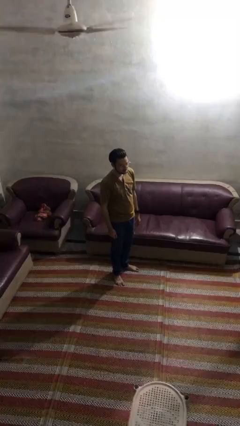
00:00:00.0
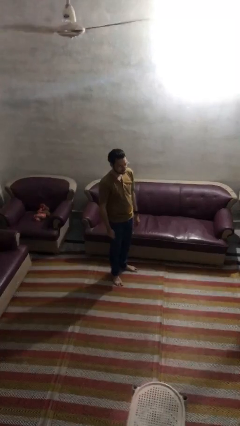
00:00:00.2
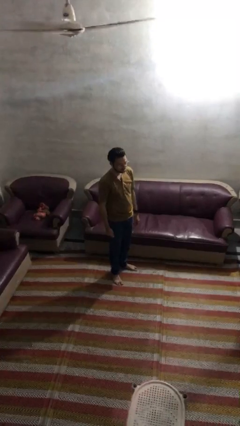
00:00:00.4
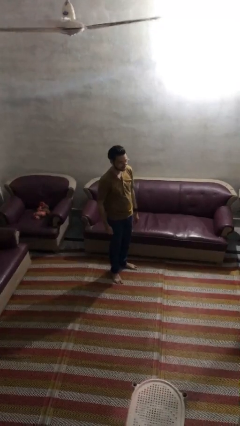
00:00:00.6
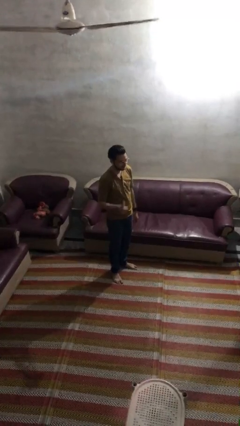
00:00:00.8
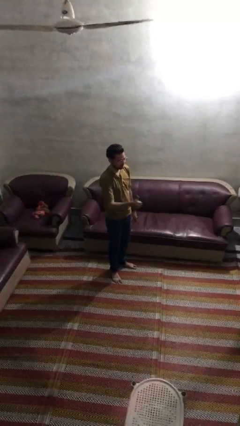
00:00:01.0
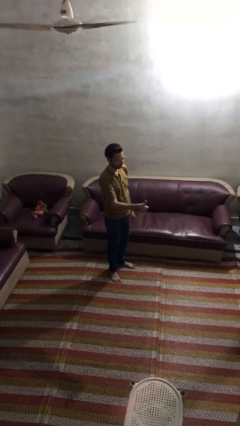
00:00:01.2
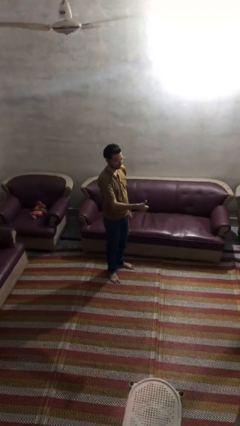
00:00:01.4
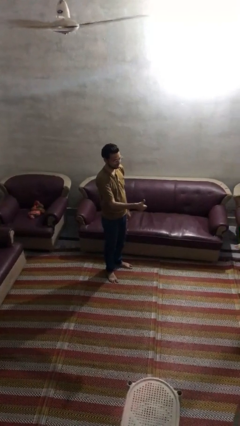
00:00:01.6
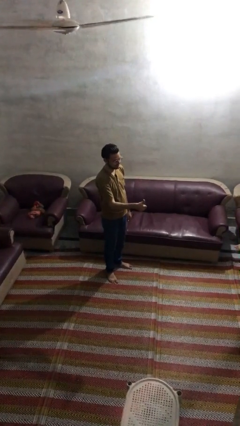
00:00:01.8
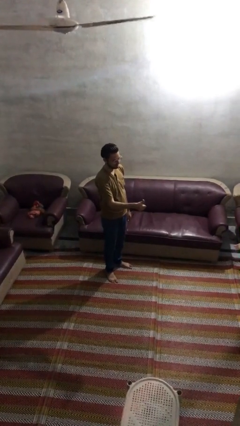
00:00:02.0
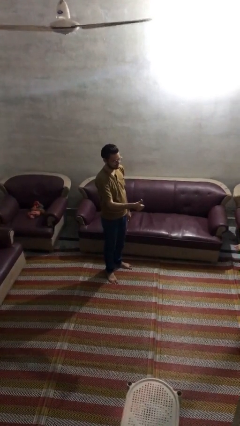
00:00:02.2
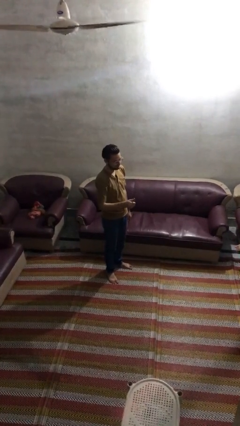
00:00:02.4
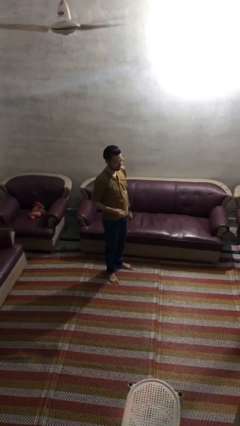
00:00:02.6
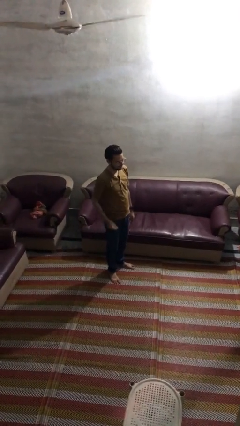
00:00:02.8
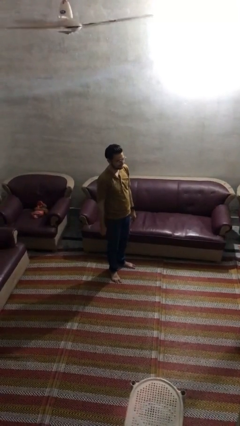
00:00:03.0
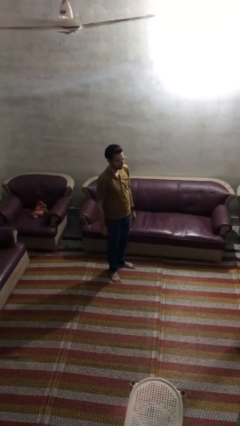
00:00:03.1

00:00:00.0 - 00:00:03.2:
person gestures thumbs up

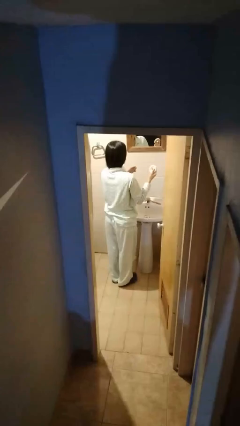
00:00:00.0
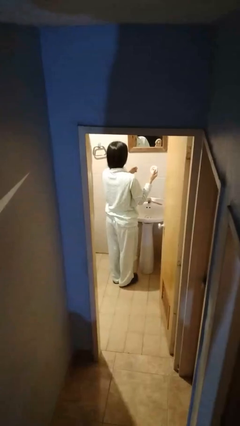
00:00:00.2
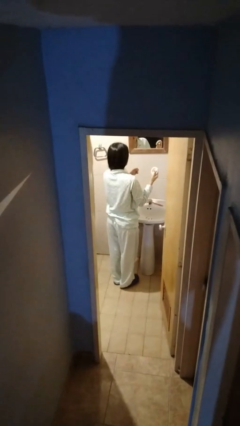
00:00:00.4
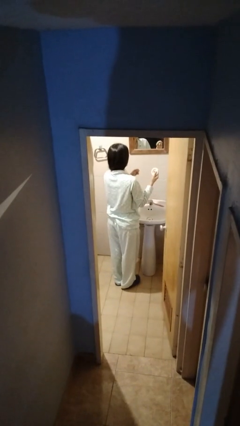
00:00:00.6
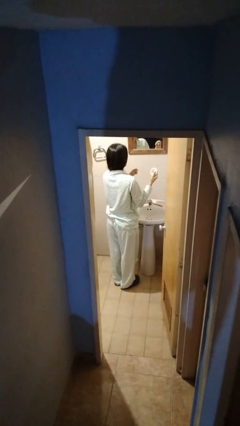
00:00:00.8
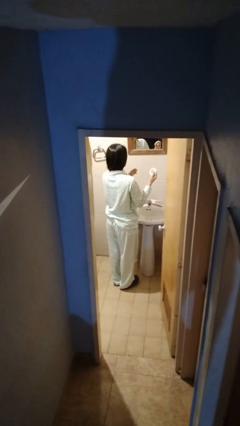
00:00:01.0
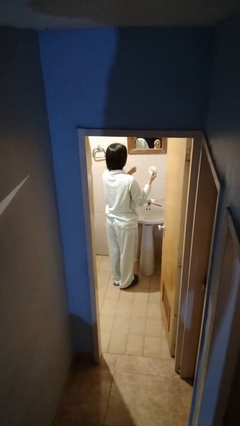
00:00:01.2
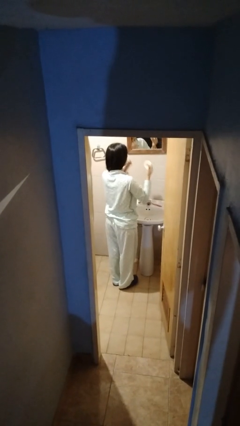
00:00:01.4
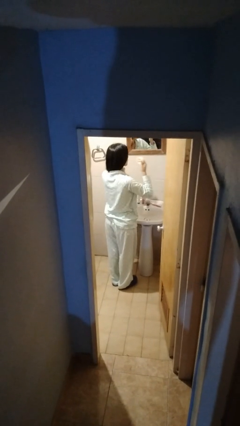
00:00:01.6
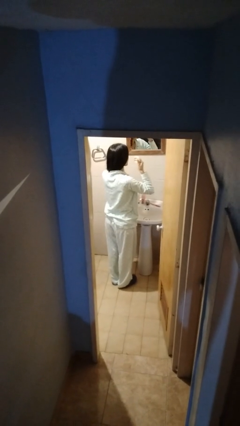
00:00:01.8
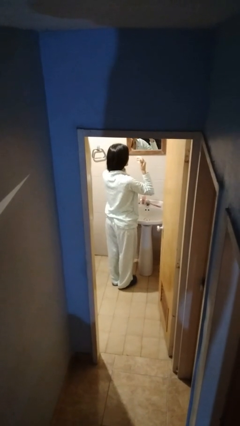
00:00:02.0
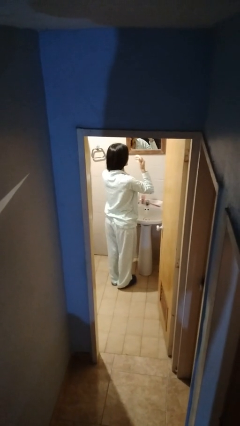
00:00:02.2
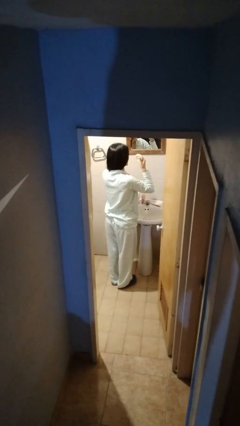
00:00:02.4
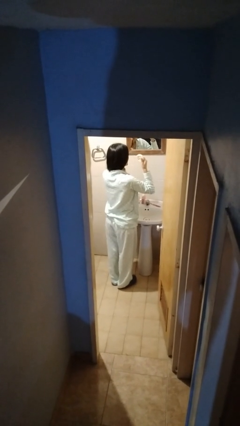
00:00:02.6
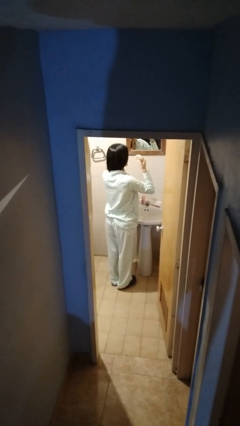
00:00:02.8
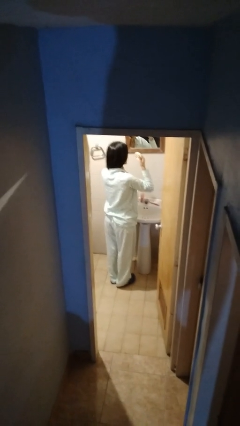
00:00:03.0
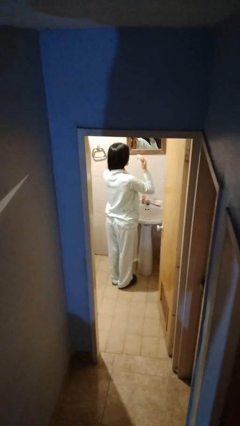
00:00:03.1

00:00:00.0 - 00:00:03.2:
person flosses

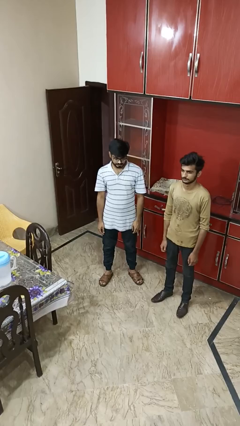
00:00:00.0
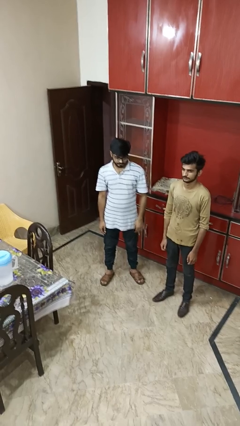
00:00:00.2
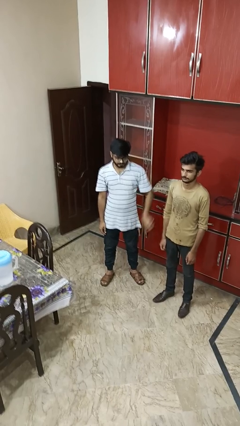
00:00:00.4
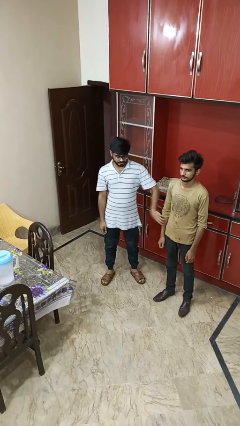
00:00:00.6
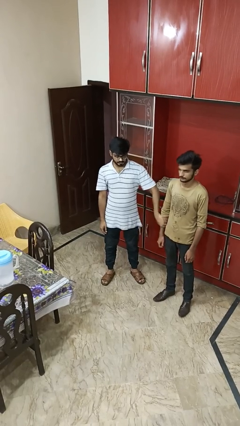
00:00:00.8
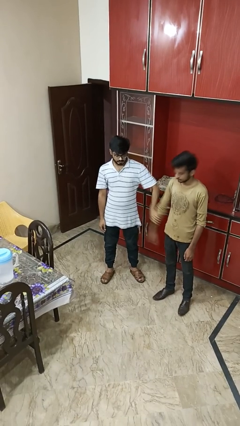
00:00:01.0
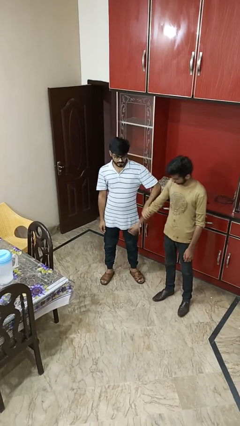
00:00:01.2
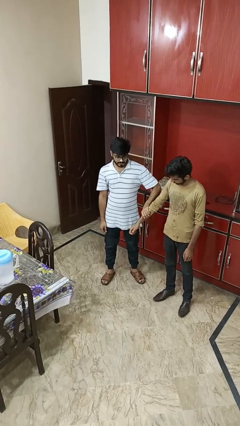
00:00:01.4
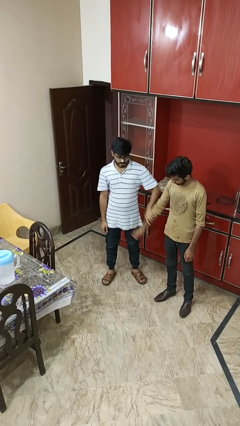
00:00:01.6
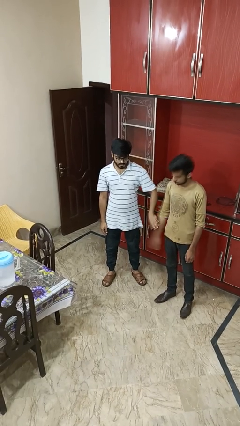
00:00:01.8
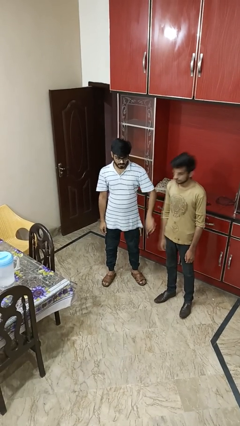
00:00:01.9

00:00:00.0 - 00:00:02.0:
person grabs person by forearm

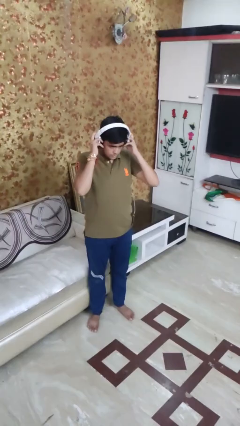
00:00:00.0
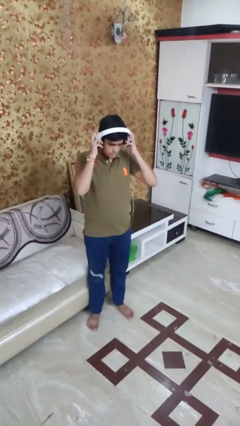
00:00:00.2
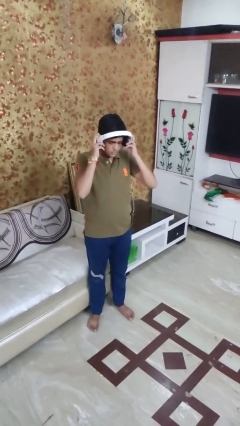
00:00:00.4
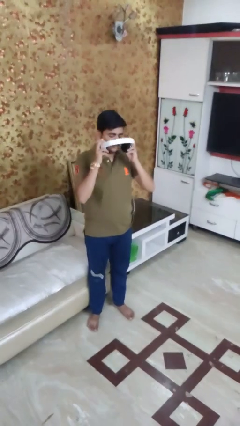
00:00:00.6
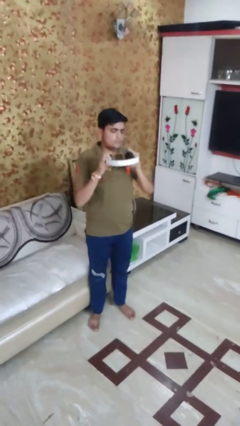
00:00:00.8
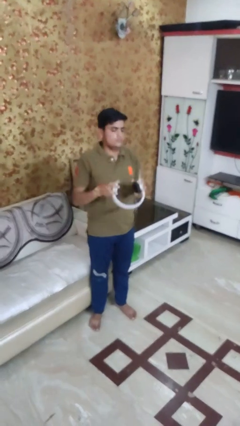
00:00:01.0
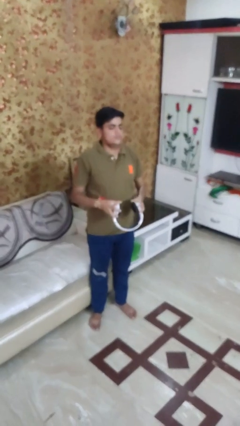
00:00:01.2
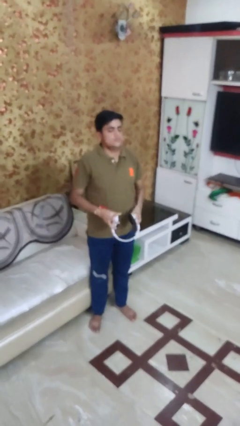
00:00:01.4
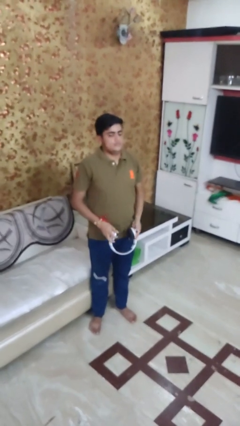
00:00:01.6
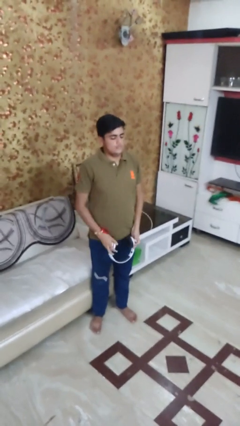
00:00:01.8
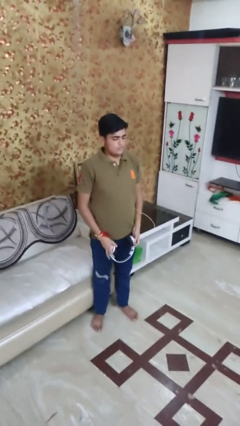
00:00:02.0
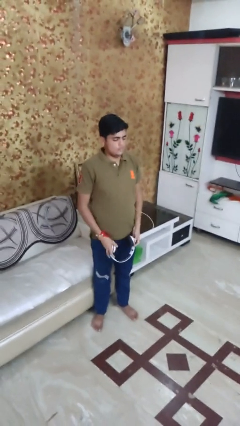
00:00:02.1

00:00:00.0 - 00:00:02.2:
person takes off headphones

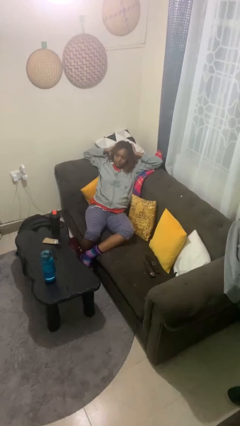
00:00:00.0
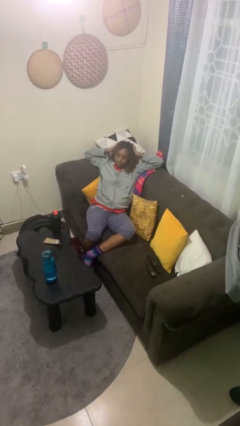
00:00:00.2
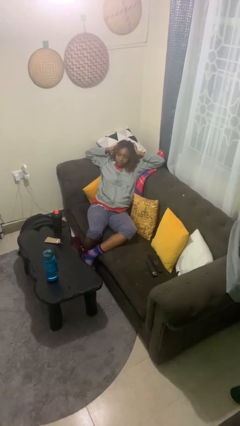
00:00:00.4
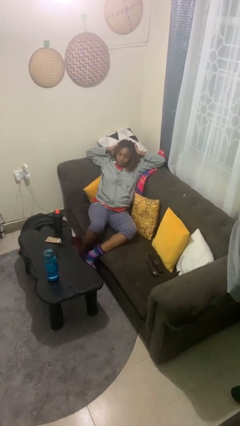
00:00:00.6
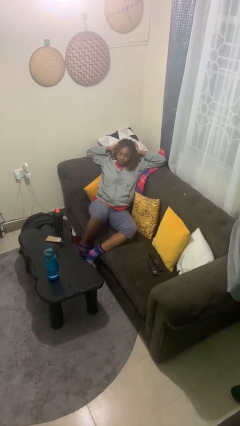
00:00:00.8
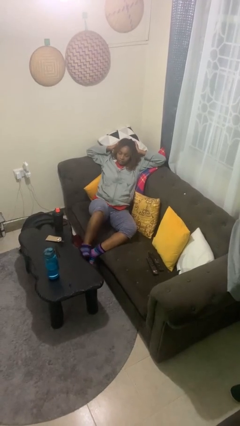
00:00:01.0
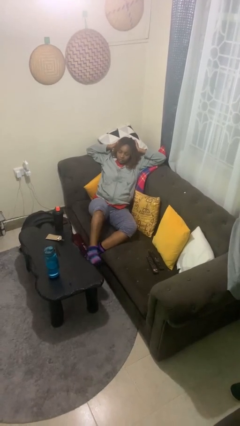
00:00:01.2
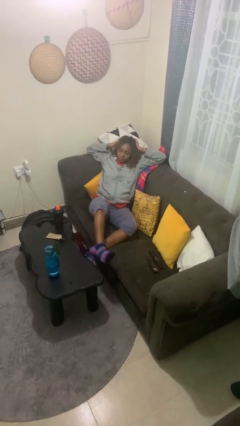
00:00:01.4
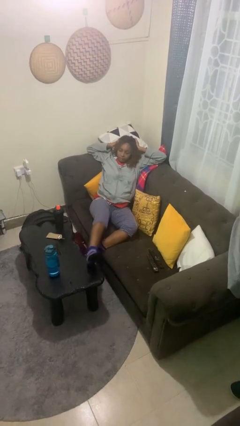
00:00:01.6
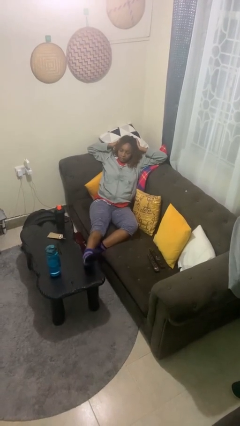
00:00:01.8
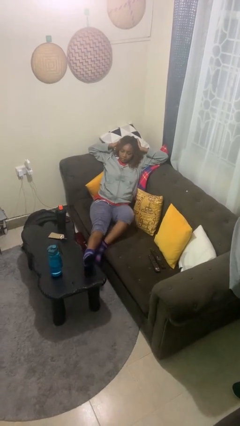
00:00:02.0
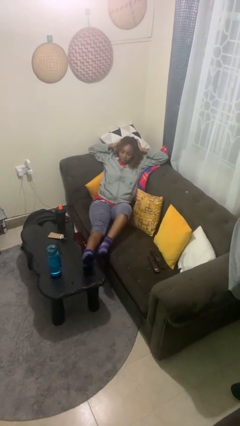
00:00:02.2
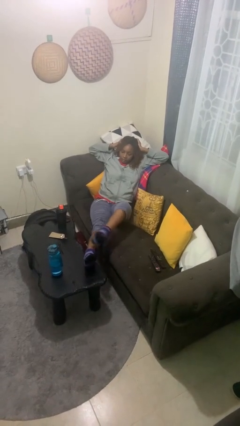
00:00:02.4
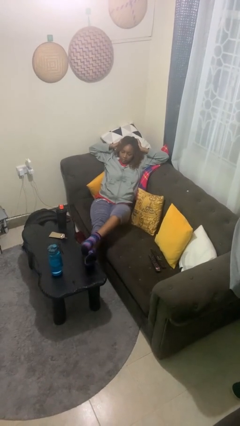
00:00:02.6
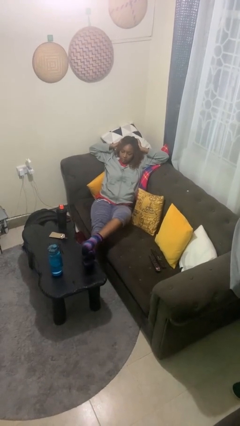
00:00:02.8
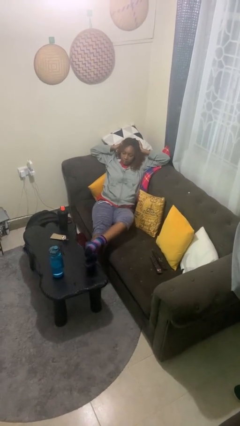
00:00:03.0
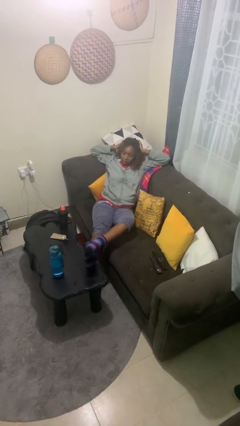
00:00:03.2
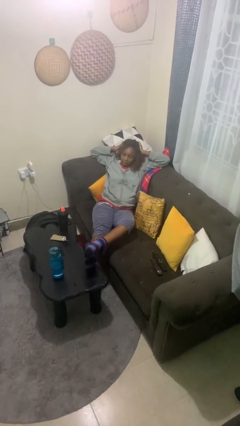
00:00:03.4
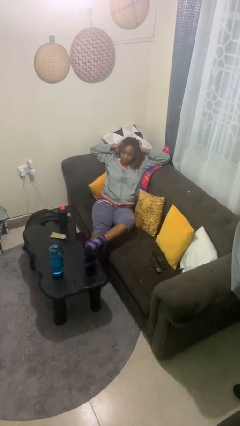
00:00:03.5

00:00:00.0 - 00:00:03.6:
person puts feet up

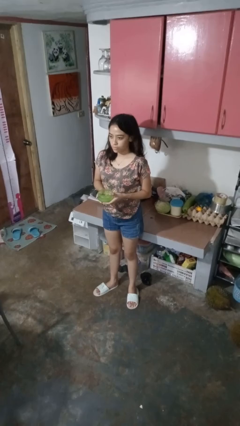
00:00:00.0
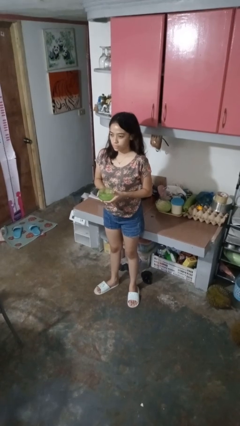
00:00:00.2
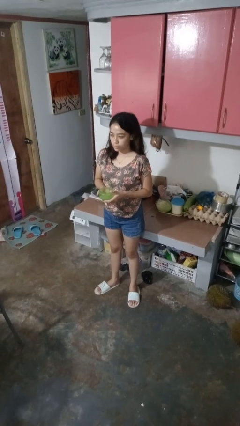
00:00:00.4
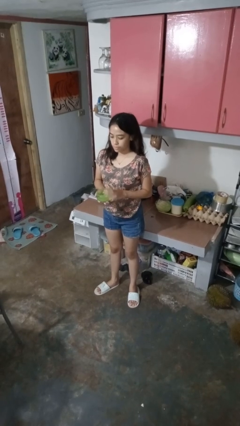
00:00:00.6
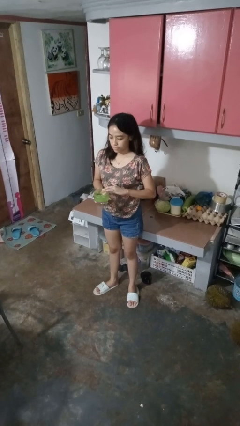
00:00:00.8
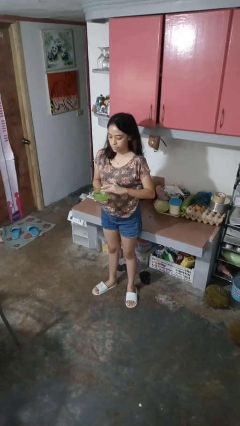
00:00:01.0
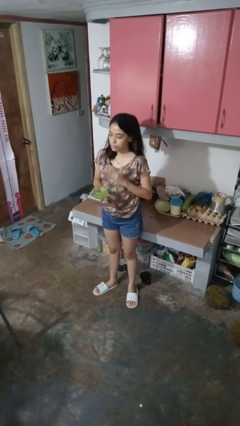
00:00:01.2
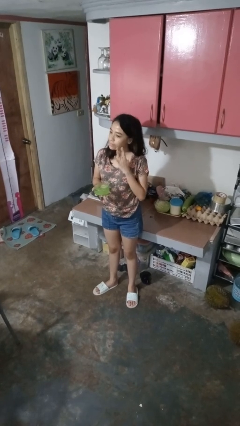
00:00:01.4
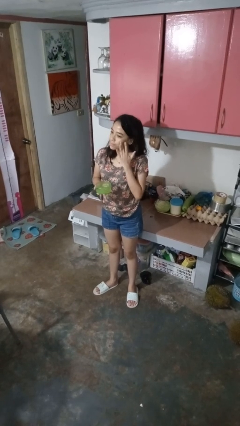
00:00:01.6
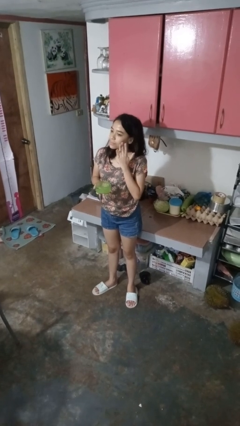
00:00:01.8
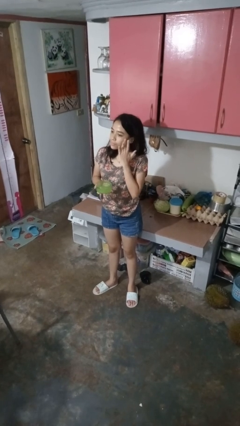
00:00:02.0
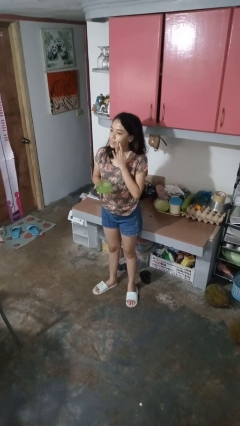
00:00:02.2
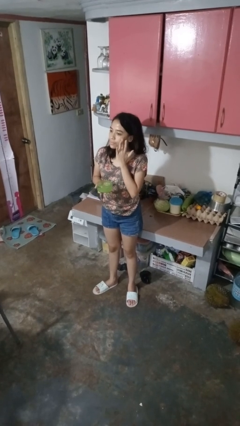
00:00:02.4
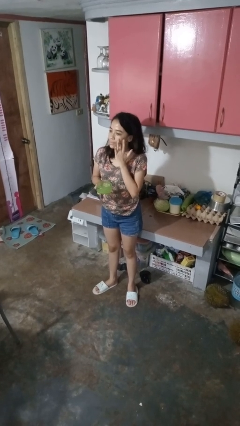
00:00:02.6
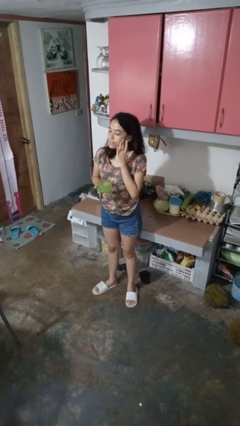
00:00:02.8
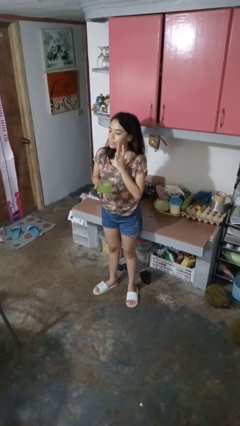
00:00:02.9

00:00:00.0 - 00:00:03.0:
person applies facial moisturizer
